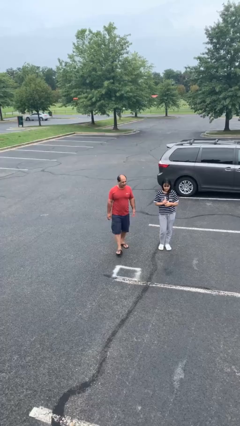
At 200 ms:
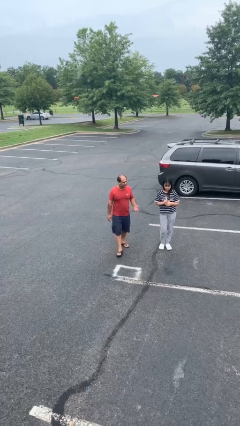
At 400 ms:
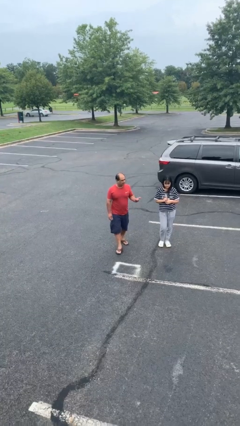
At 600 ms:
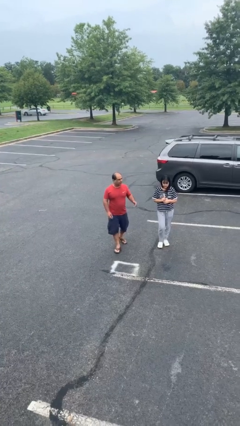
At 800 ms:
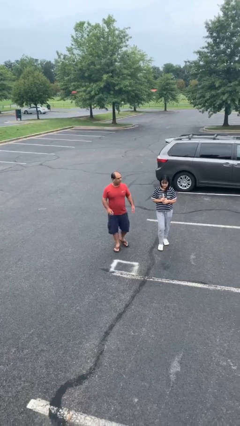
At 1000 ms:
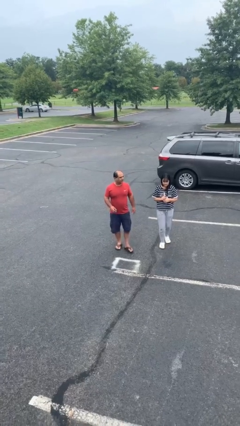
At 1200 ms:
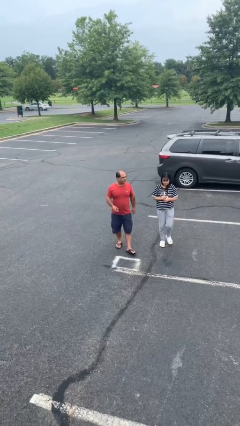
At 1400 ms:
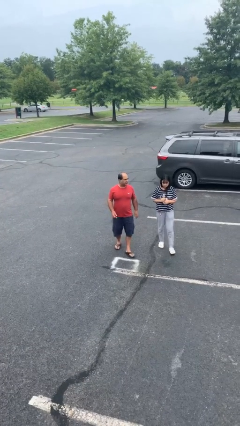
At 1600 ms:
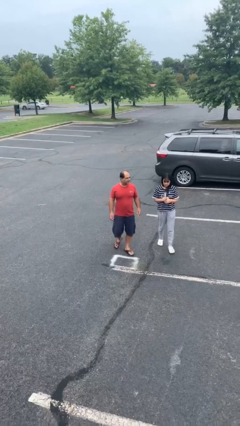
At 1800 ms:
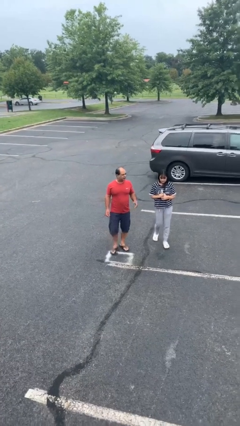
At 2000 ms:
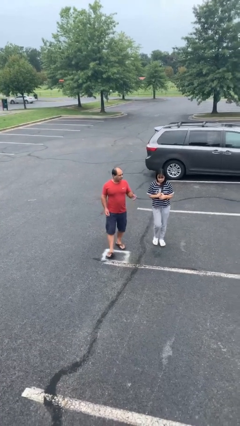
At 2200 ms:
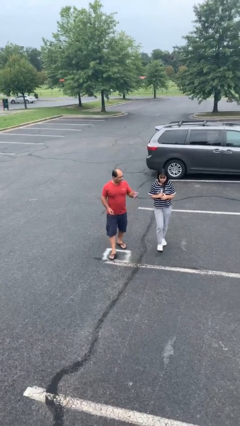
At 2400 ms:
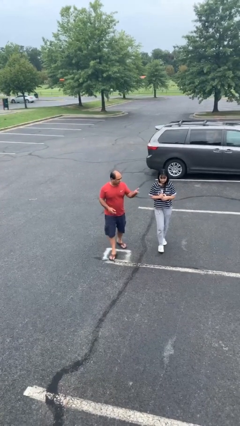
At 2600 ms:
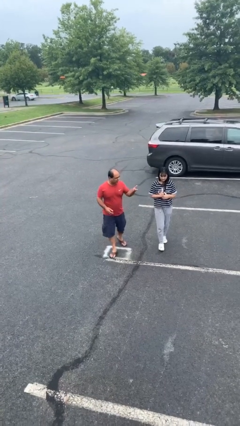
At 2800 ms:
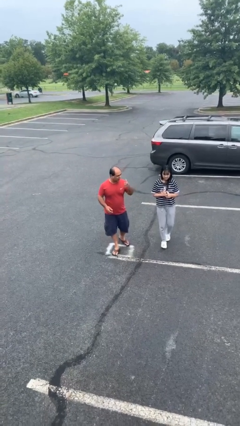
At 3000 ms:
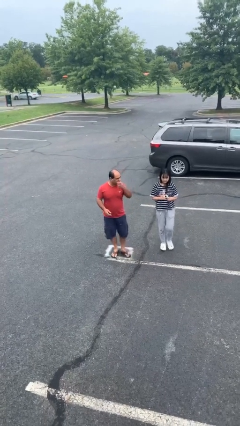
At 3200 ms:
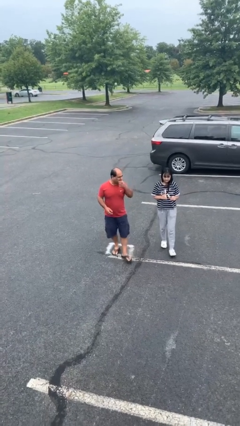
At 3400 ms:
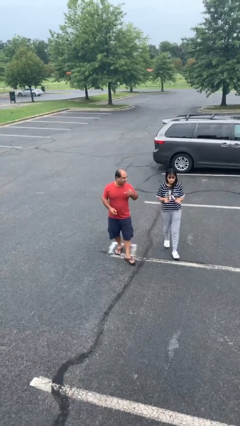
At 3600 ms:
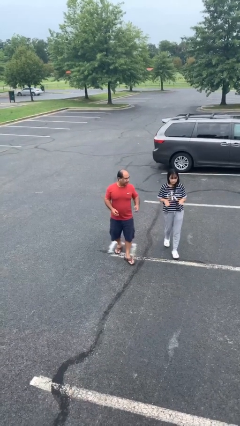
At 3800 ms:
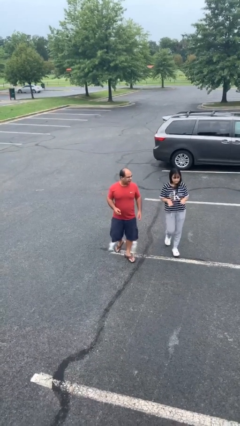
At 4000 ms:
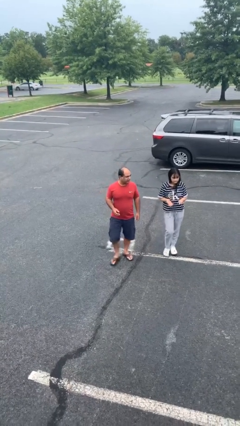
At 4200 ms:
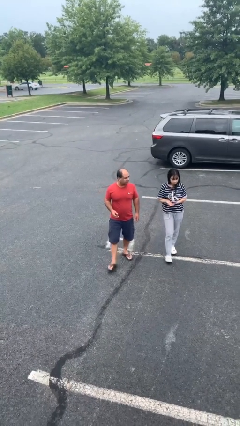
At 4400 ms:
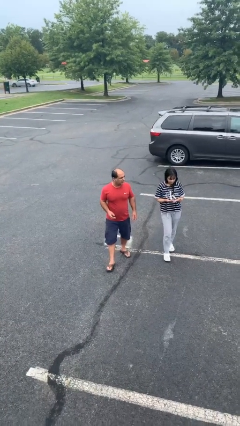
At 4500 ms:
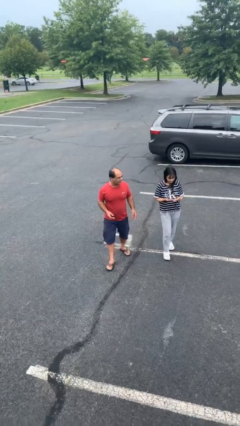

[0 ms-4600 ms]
person talks to person

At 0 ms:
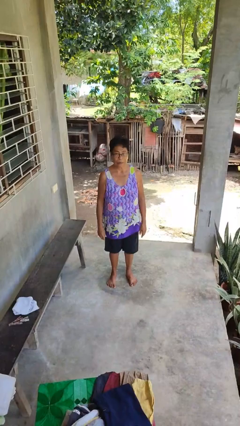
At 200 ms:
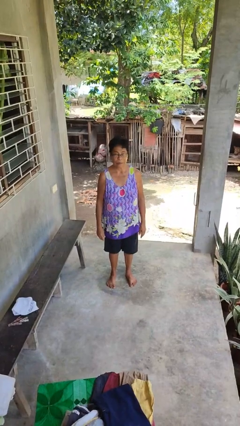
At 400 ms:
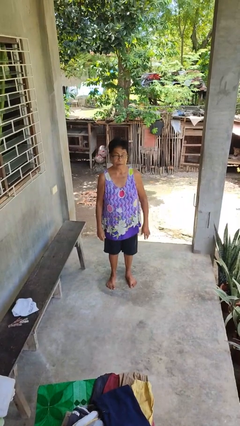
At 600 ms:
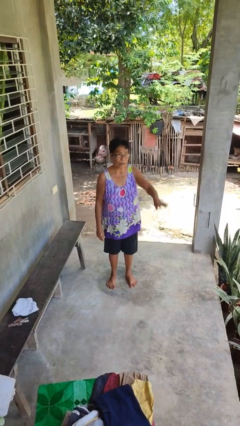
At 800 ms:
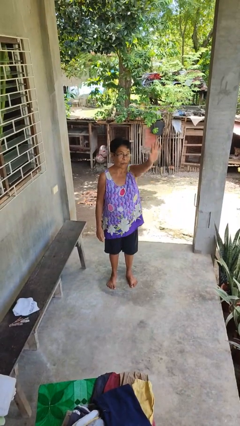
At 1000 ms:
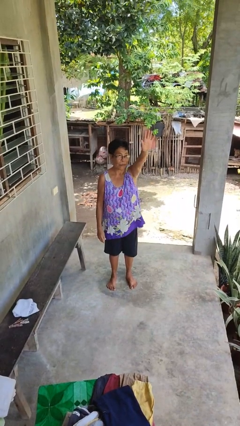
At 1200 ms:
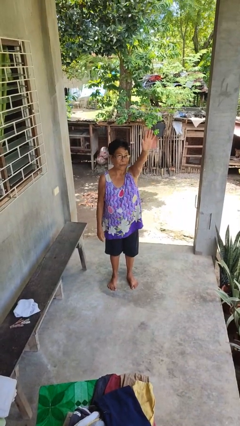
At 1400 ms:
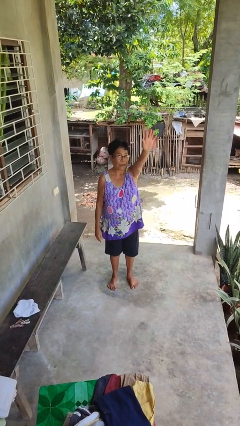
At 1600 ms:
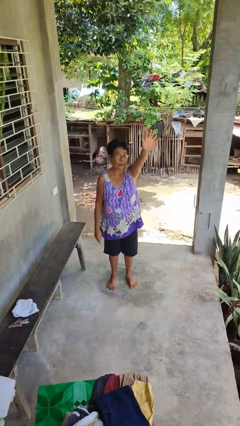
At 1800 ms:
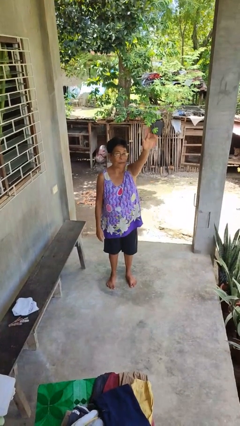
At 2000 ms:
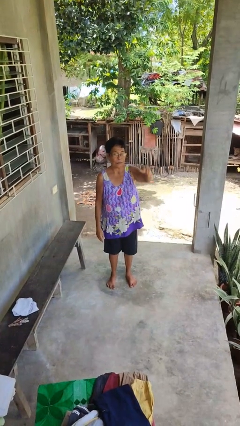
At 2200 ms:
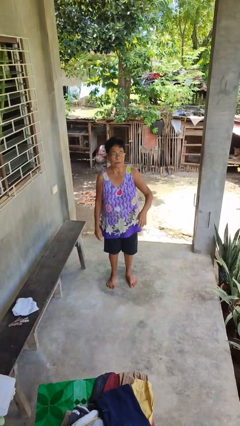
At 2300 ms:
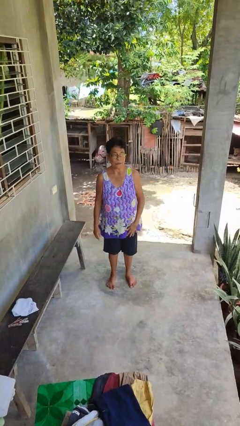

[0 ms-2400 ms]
person gestures stop

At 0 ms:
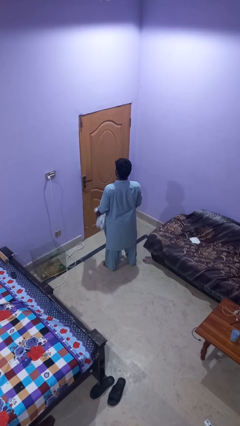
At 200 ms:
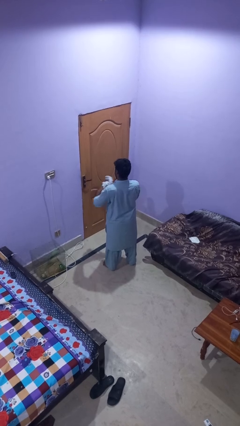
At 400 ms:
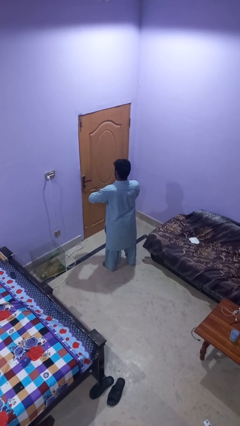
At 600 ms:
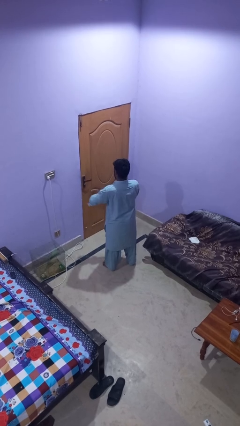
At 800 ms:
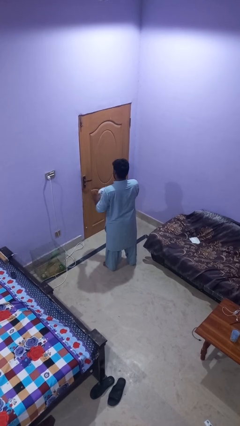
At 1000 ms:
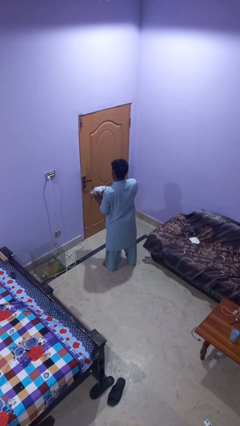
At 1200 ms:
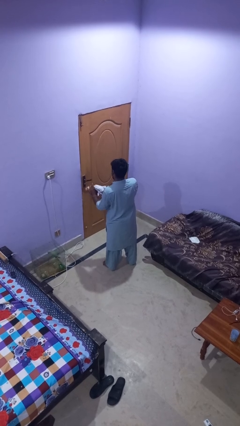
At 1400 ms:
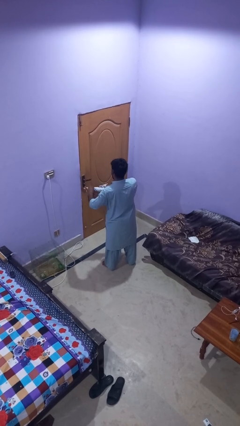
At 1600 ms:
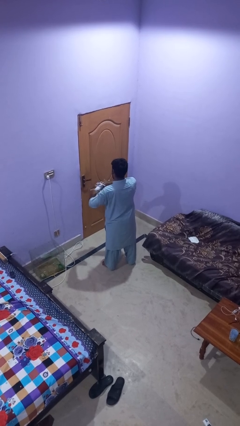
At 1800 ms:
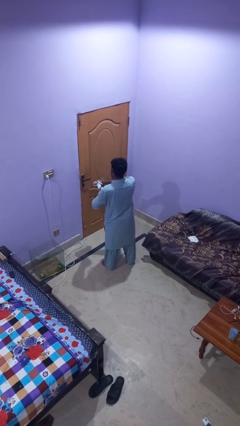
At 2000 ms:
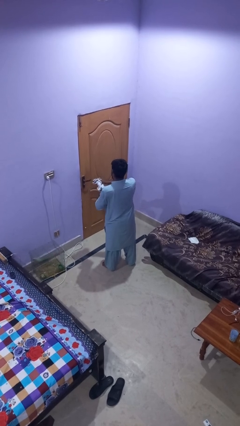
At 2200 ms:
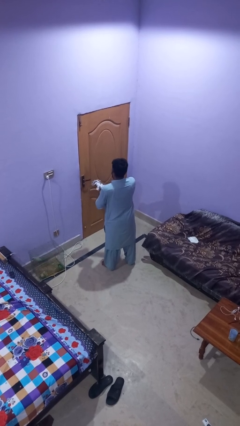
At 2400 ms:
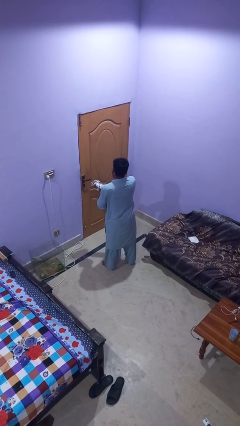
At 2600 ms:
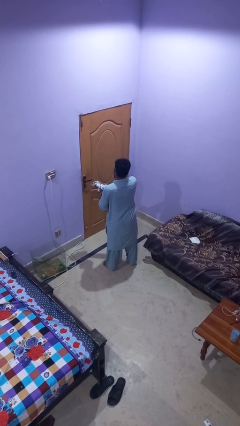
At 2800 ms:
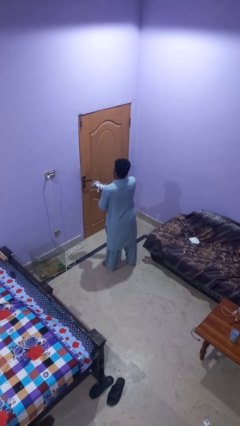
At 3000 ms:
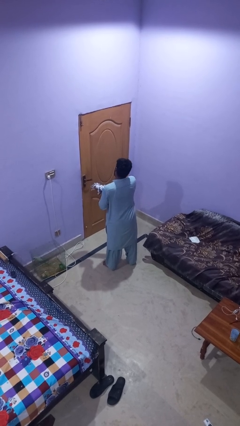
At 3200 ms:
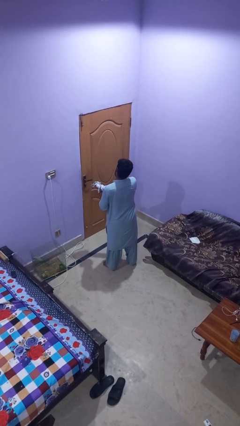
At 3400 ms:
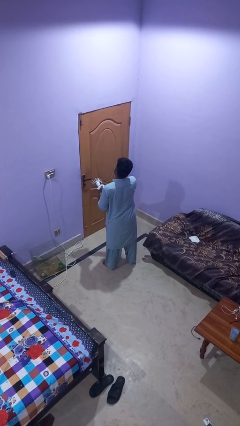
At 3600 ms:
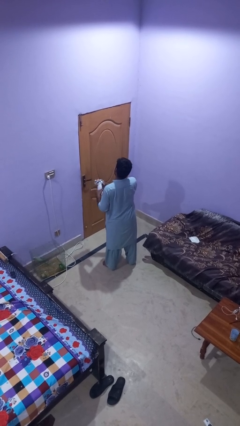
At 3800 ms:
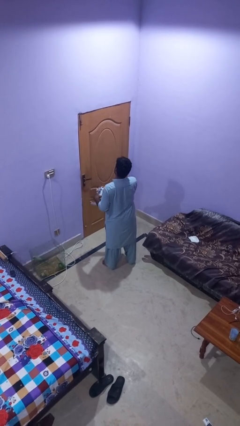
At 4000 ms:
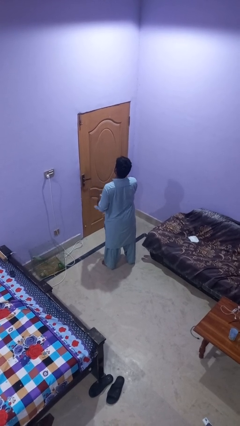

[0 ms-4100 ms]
person squeezes object

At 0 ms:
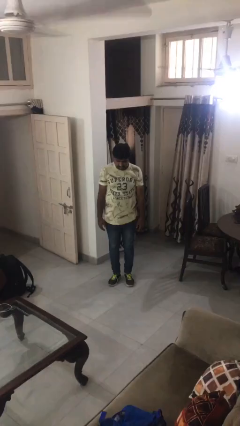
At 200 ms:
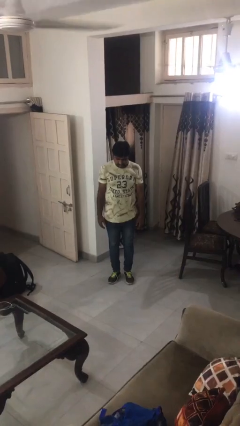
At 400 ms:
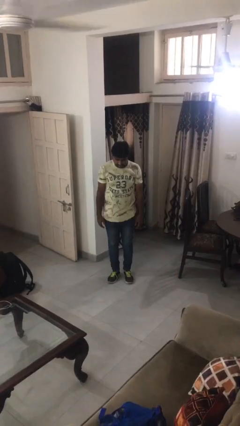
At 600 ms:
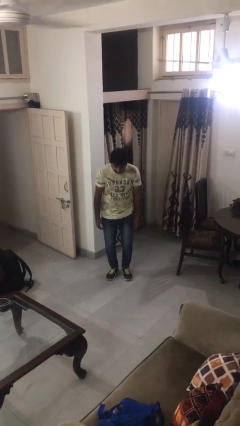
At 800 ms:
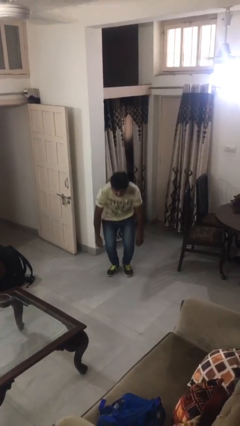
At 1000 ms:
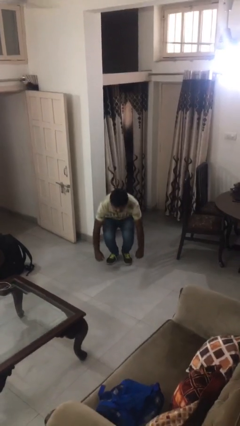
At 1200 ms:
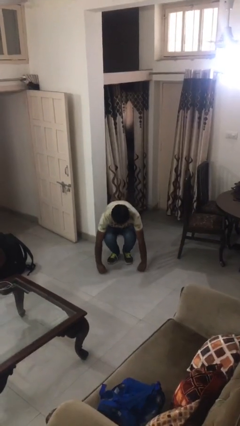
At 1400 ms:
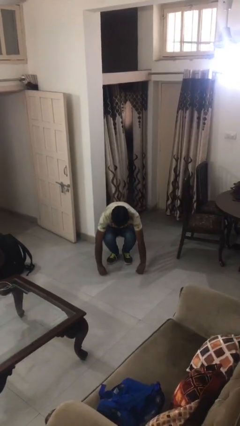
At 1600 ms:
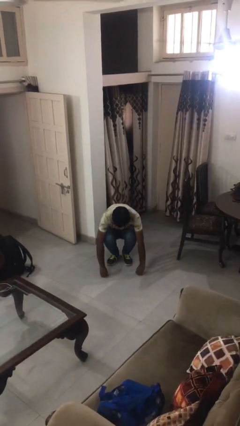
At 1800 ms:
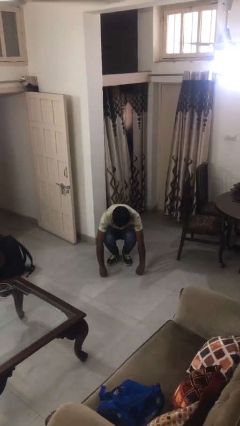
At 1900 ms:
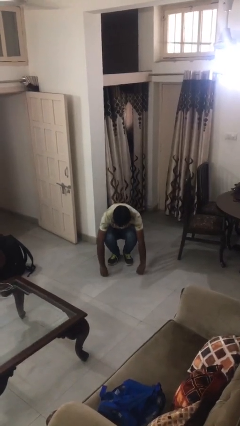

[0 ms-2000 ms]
person squats

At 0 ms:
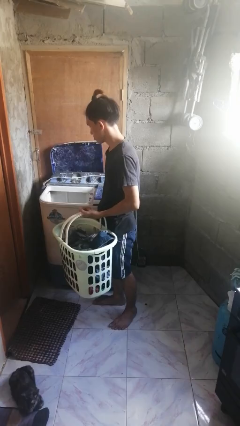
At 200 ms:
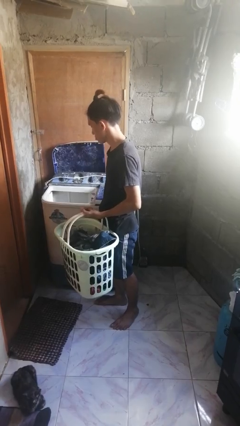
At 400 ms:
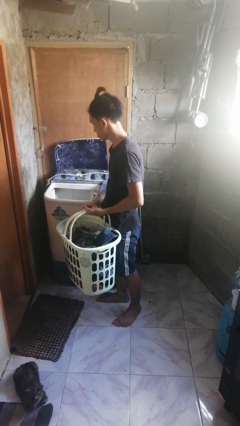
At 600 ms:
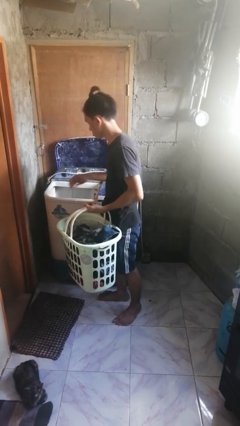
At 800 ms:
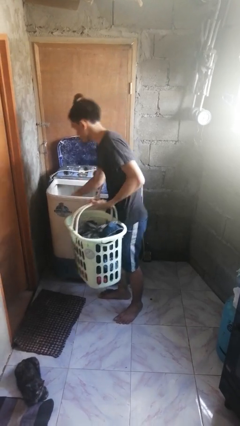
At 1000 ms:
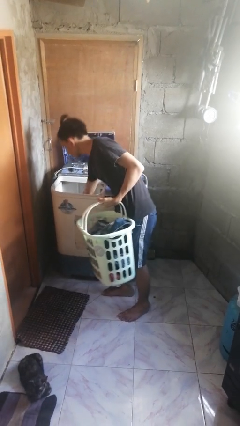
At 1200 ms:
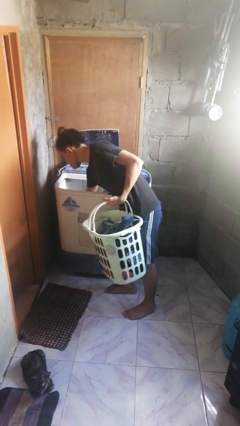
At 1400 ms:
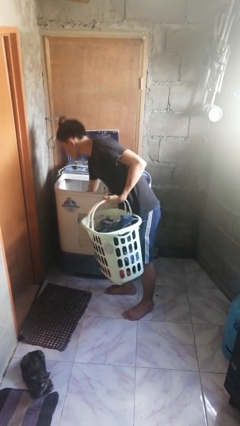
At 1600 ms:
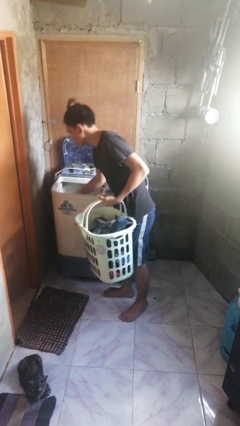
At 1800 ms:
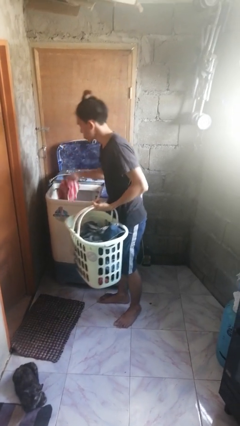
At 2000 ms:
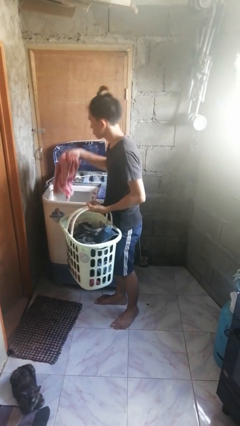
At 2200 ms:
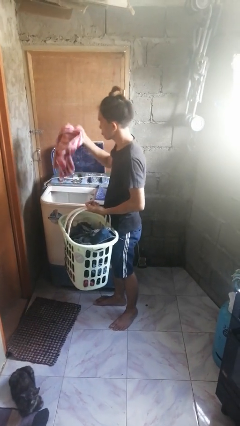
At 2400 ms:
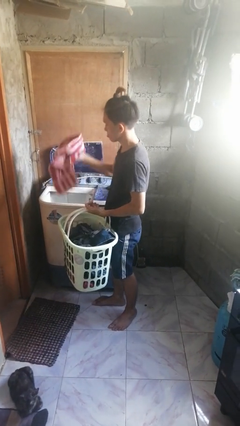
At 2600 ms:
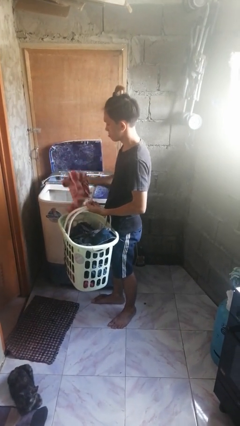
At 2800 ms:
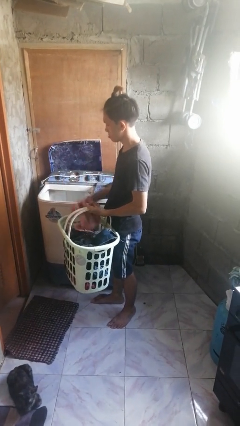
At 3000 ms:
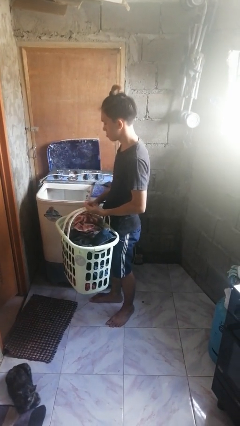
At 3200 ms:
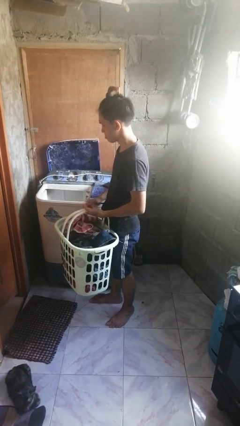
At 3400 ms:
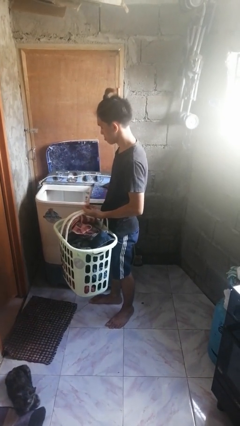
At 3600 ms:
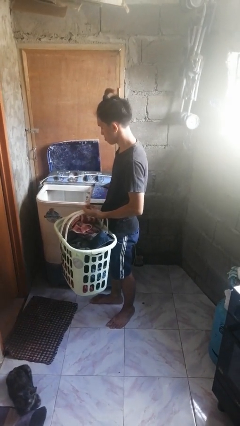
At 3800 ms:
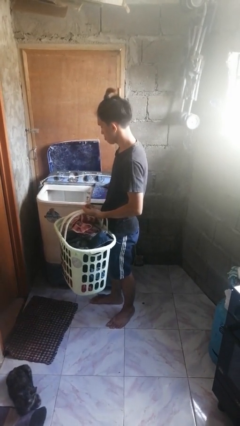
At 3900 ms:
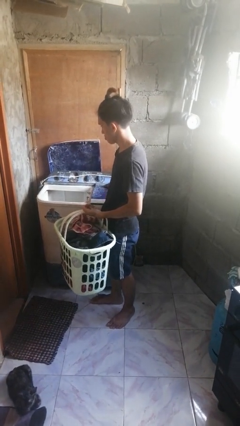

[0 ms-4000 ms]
person unloads clotheswasher

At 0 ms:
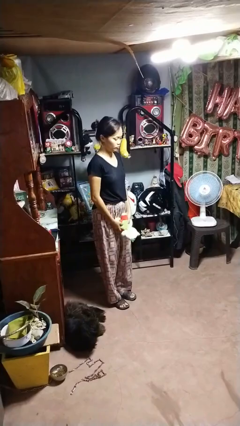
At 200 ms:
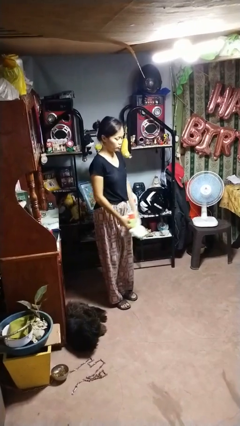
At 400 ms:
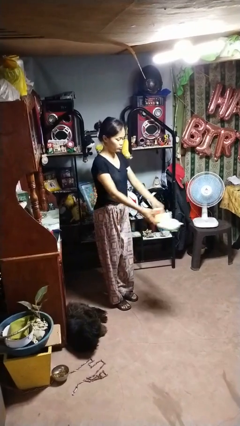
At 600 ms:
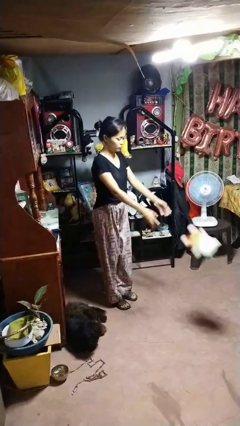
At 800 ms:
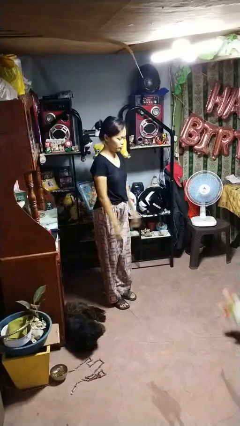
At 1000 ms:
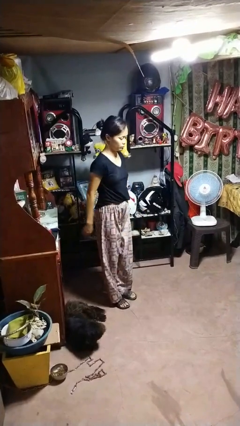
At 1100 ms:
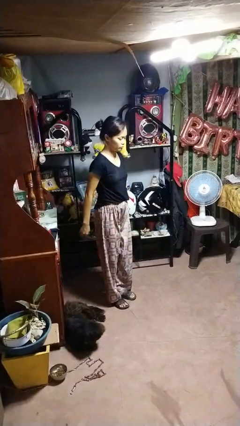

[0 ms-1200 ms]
person throws object to ground
